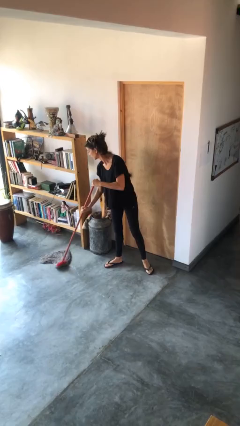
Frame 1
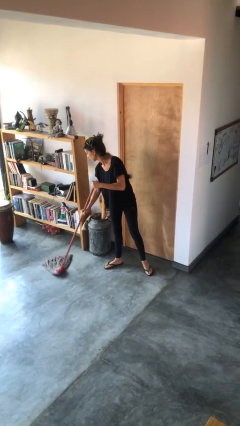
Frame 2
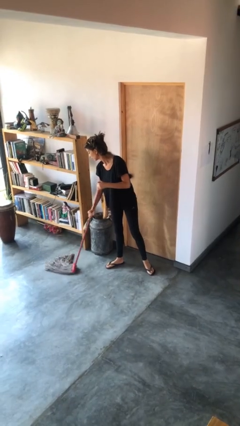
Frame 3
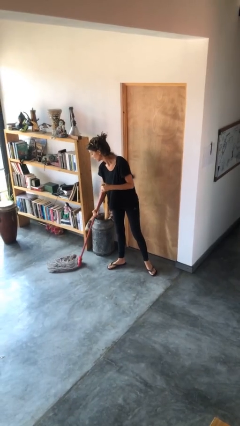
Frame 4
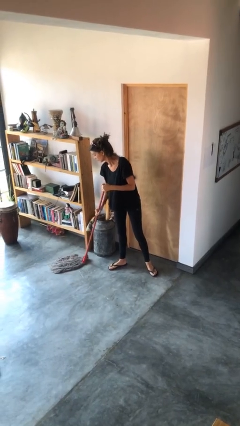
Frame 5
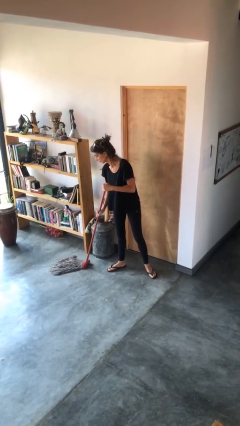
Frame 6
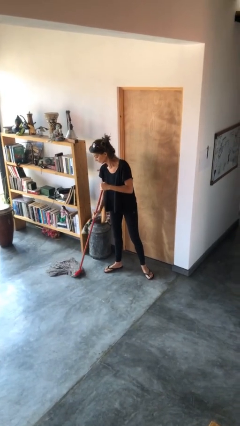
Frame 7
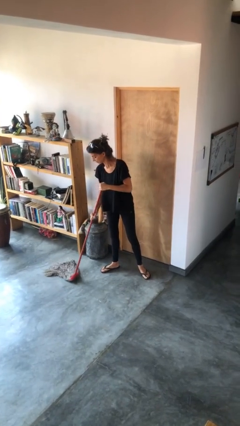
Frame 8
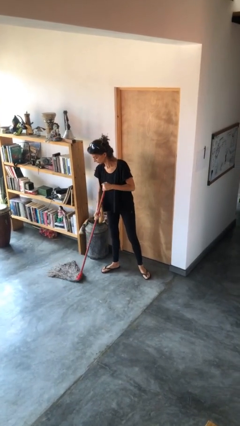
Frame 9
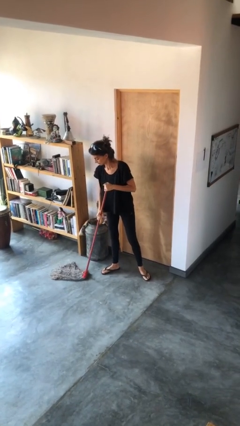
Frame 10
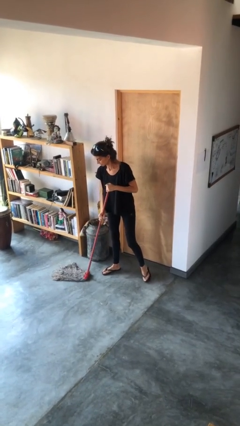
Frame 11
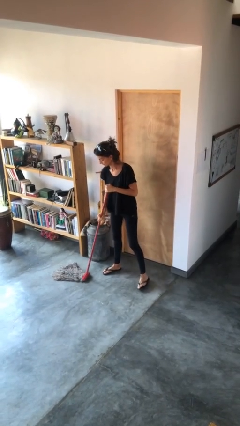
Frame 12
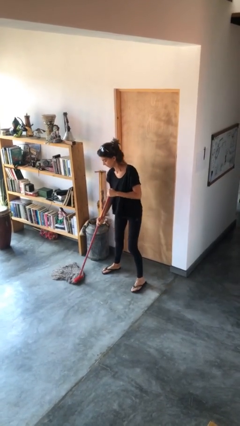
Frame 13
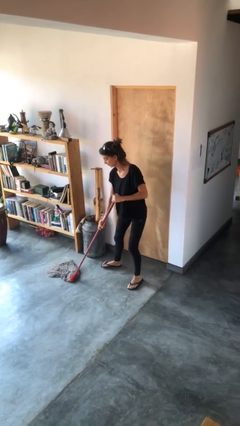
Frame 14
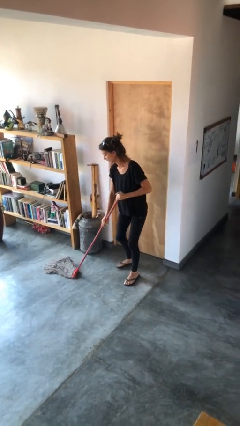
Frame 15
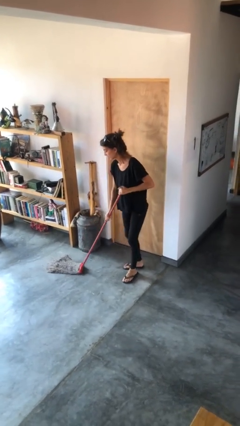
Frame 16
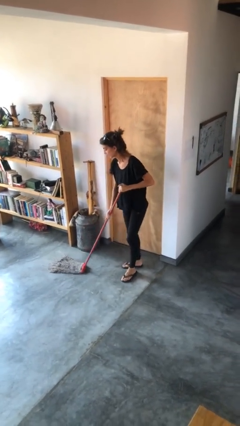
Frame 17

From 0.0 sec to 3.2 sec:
person mops

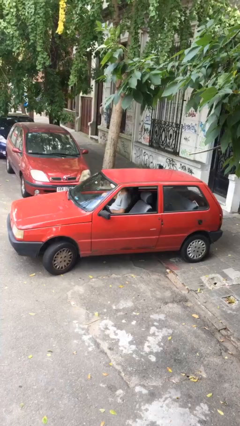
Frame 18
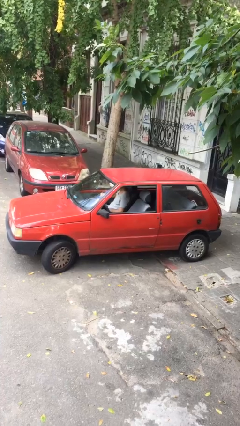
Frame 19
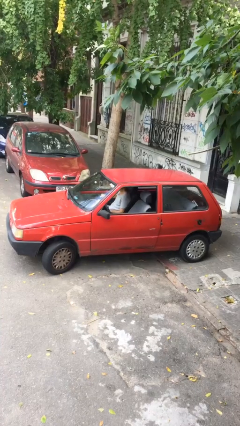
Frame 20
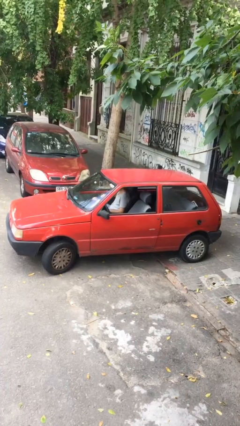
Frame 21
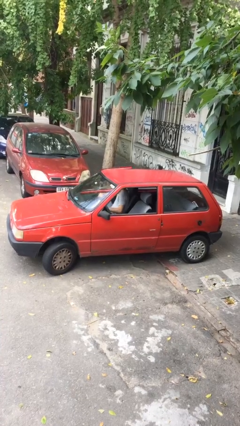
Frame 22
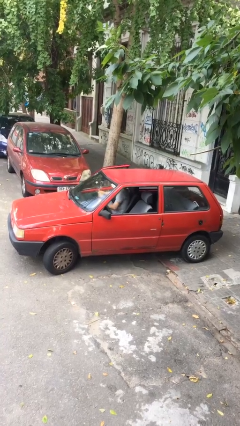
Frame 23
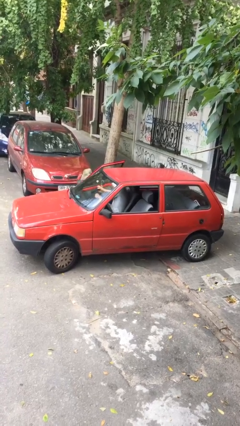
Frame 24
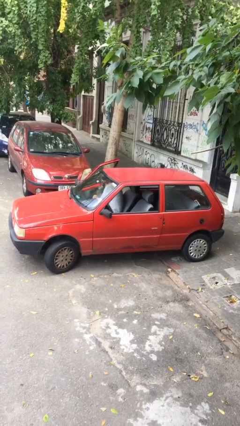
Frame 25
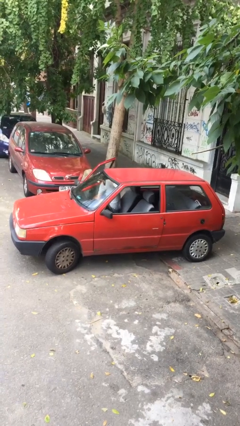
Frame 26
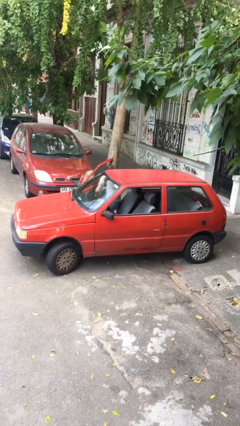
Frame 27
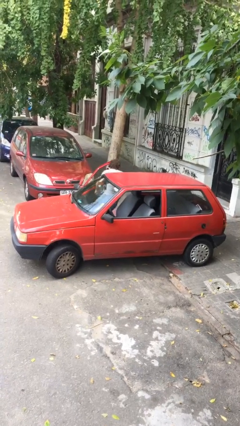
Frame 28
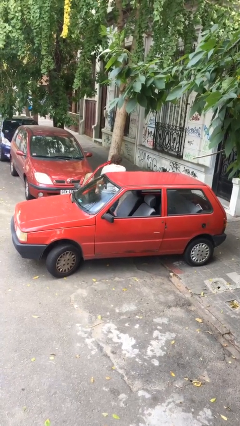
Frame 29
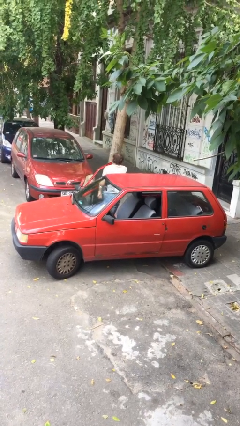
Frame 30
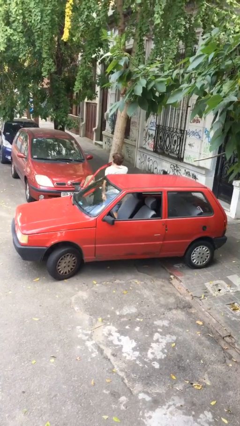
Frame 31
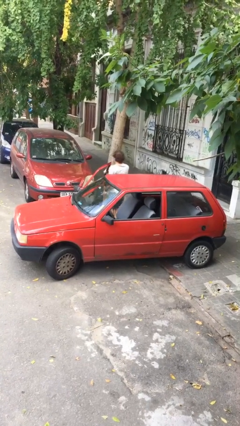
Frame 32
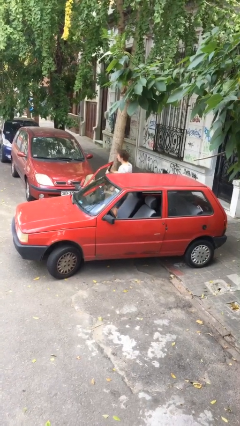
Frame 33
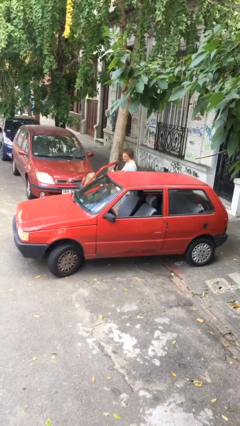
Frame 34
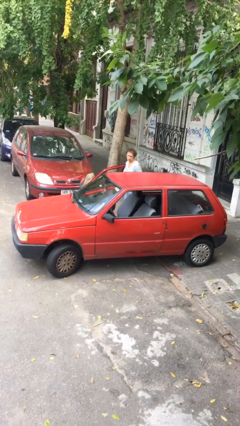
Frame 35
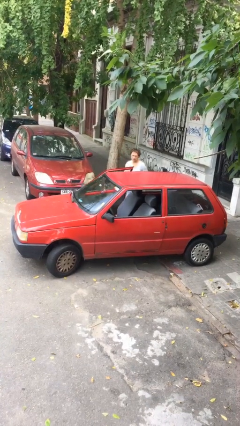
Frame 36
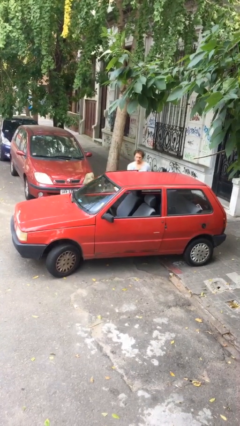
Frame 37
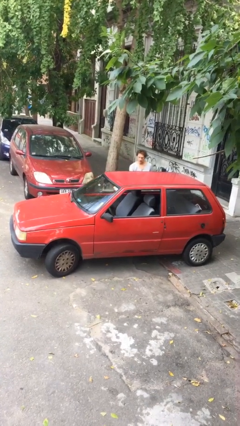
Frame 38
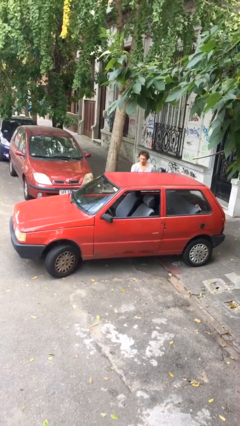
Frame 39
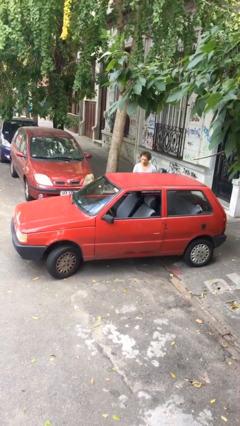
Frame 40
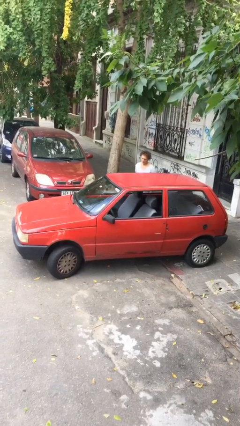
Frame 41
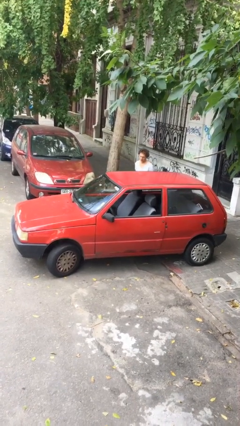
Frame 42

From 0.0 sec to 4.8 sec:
car drops off person

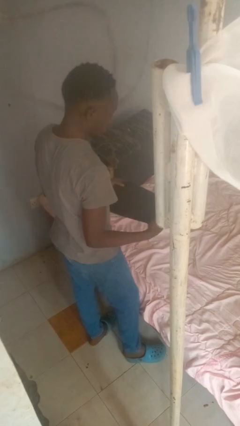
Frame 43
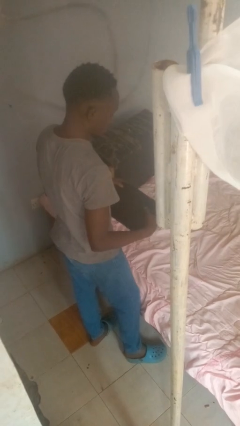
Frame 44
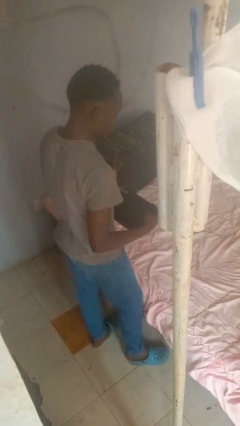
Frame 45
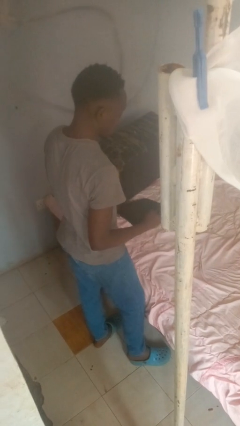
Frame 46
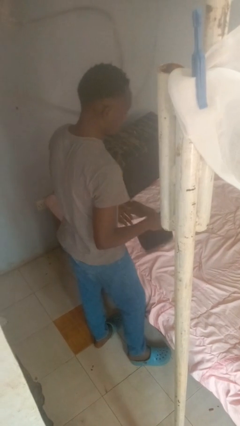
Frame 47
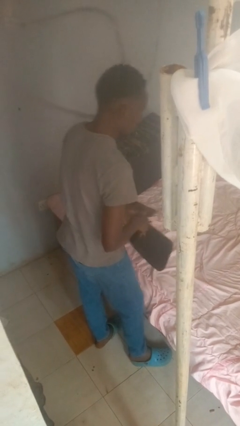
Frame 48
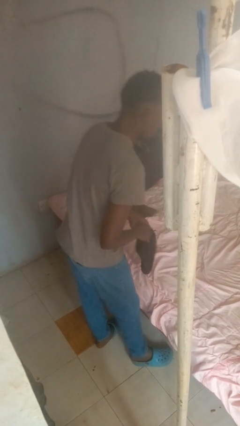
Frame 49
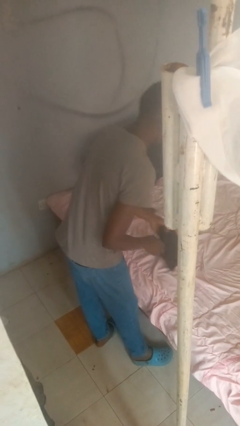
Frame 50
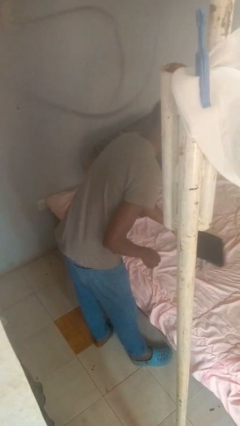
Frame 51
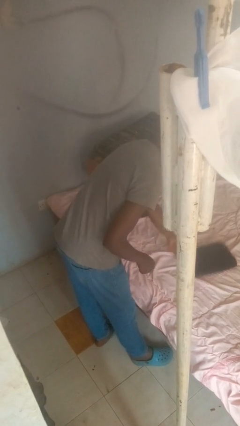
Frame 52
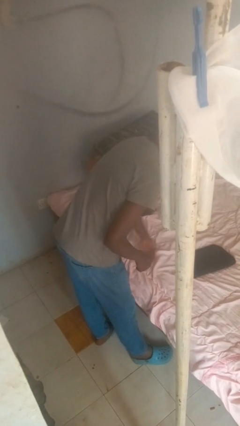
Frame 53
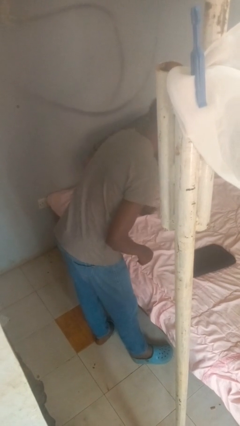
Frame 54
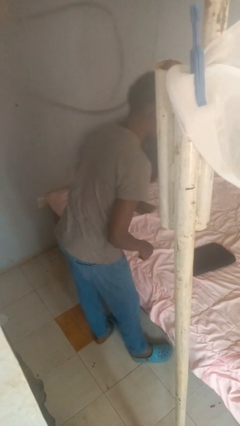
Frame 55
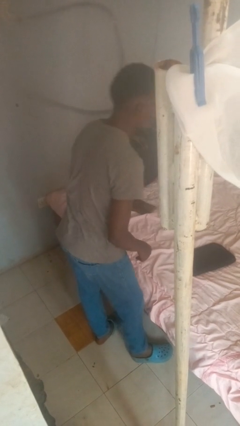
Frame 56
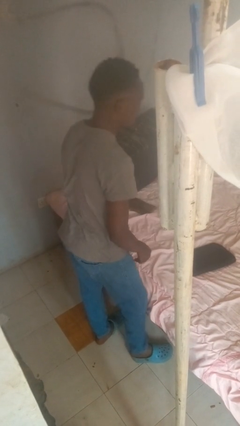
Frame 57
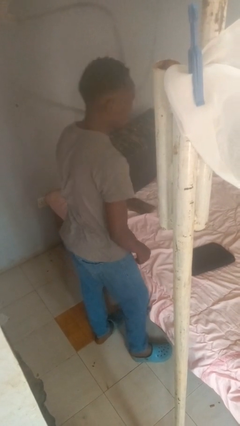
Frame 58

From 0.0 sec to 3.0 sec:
person puts down object on bed

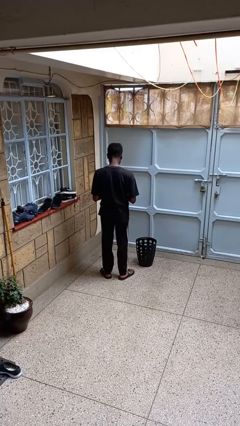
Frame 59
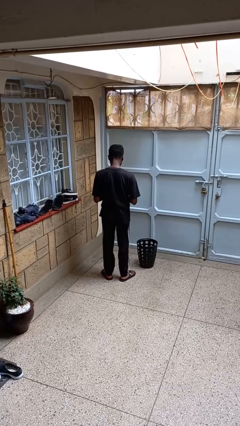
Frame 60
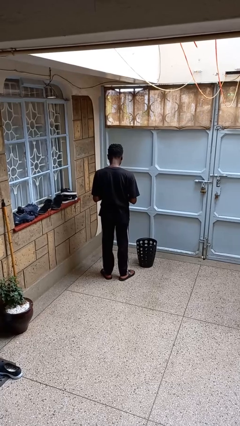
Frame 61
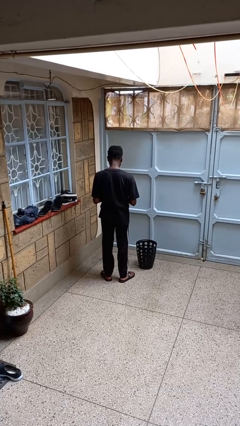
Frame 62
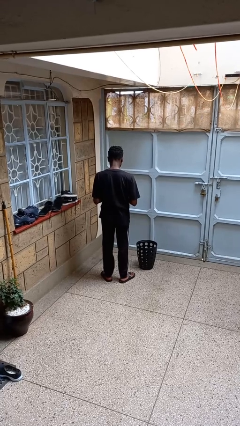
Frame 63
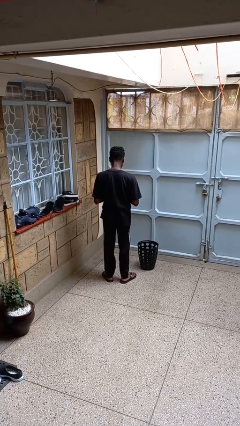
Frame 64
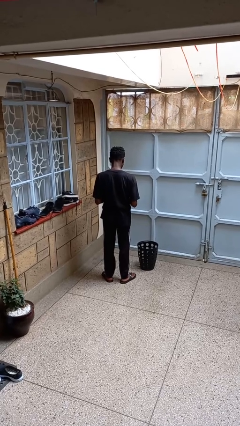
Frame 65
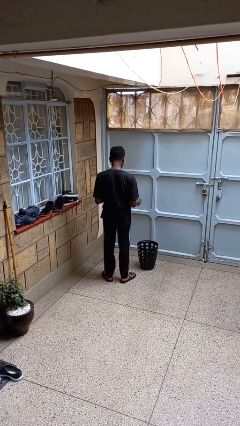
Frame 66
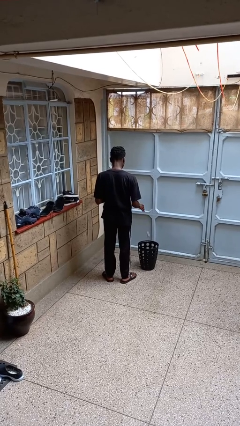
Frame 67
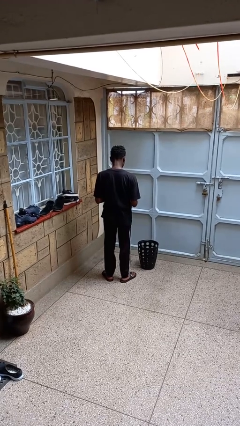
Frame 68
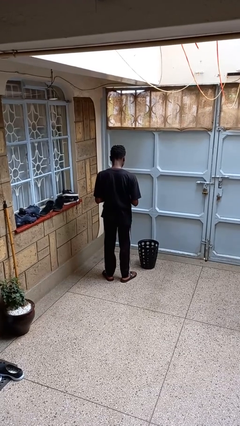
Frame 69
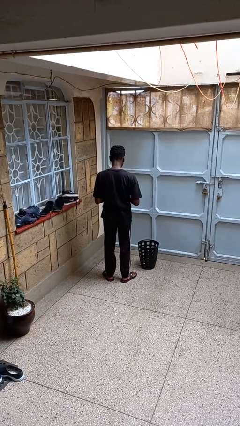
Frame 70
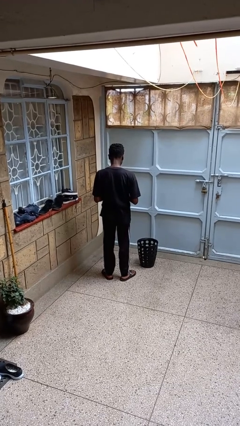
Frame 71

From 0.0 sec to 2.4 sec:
person discards trash

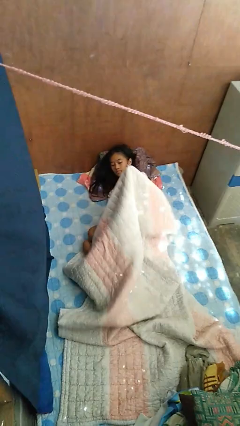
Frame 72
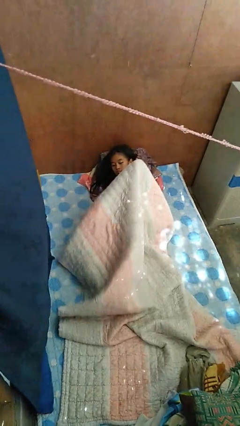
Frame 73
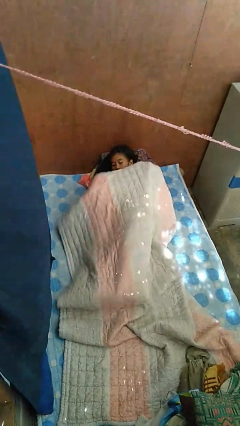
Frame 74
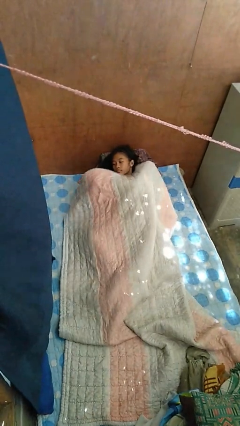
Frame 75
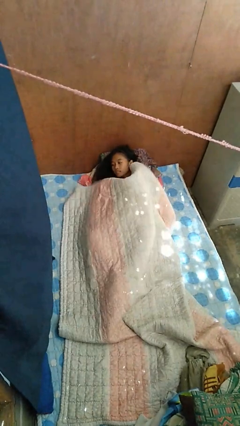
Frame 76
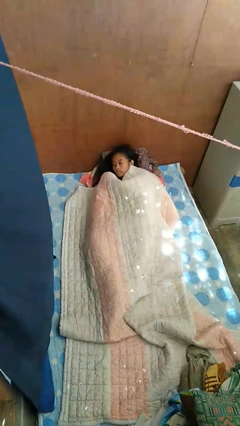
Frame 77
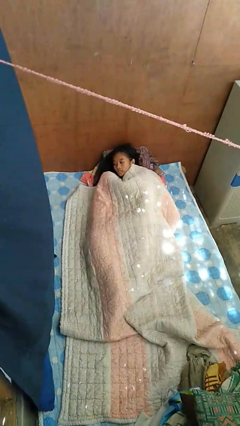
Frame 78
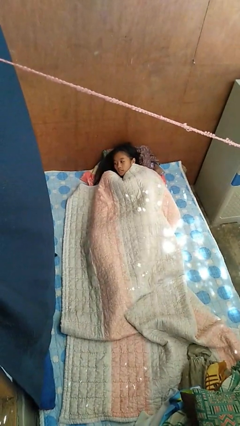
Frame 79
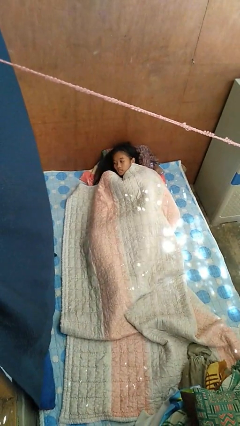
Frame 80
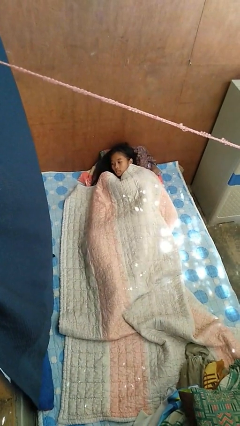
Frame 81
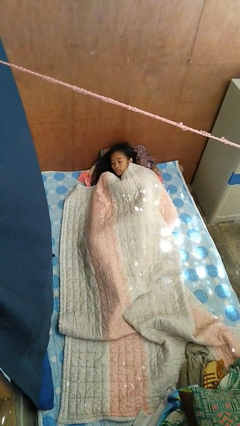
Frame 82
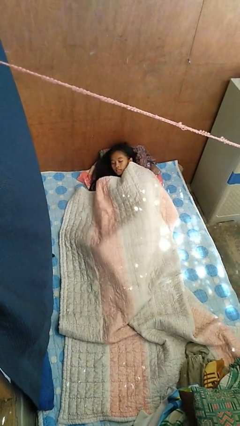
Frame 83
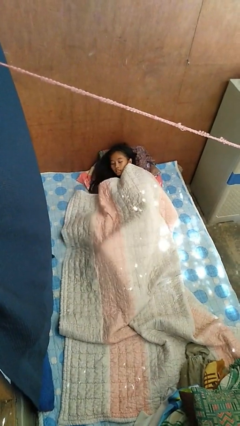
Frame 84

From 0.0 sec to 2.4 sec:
person covers with bedsheets

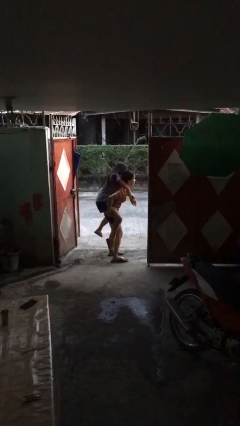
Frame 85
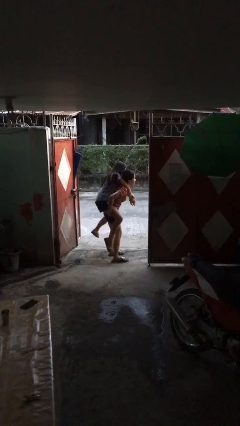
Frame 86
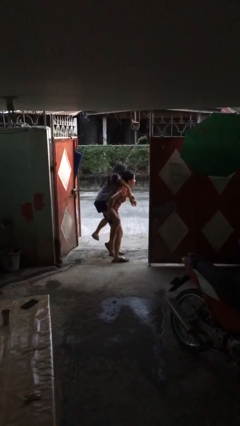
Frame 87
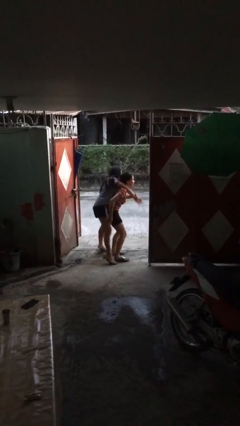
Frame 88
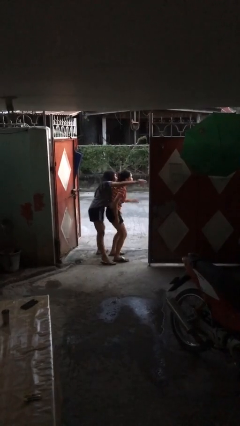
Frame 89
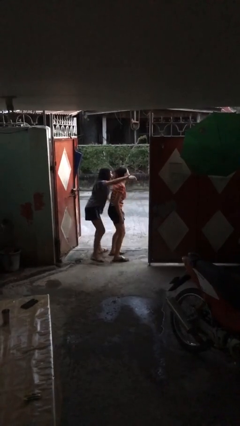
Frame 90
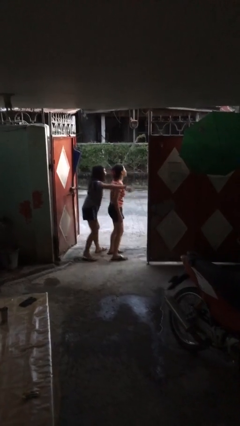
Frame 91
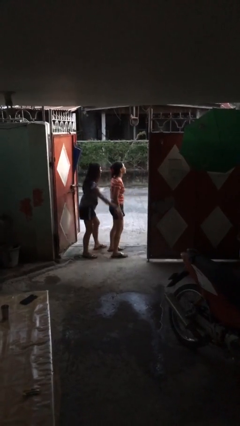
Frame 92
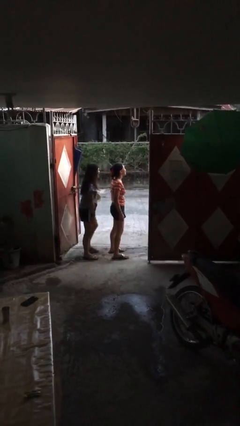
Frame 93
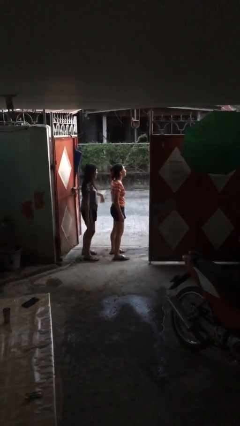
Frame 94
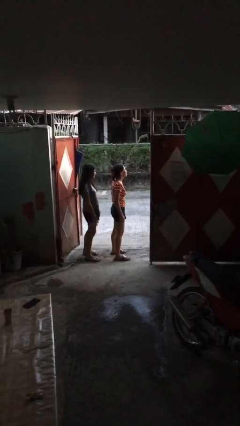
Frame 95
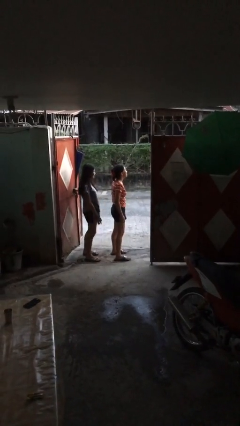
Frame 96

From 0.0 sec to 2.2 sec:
person puts down person
